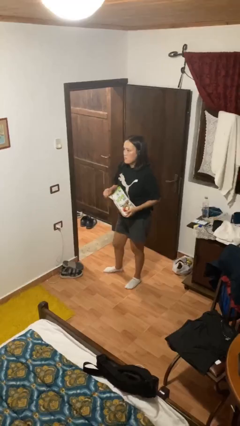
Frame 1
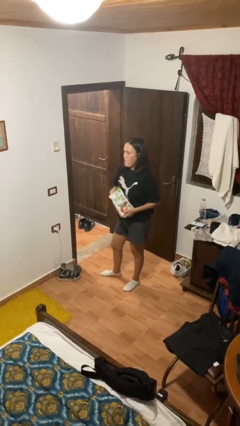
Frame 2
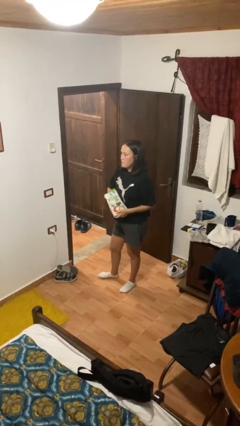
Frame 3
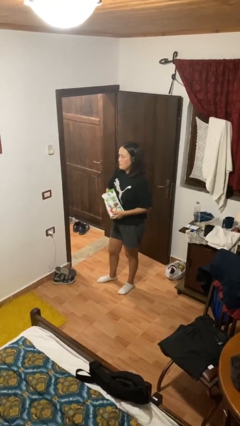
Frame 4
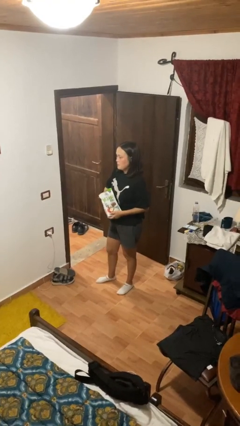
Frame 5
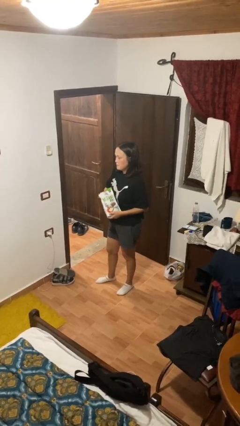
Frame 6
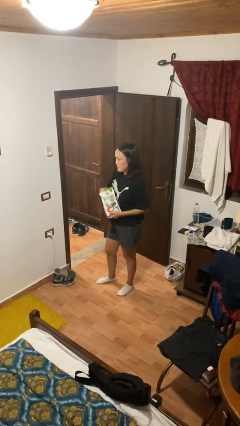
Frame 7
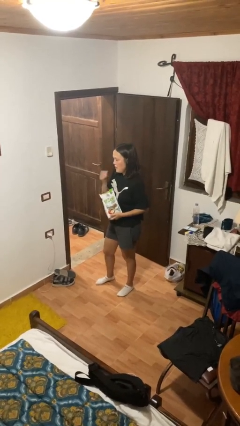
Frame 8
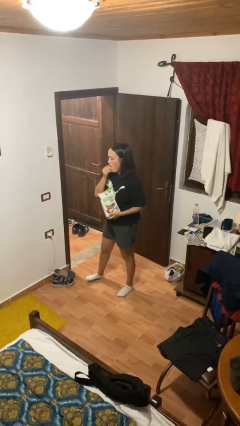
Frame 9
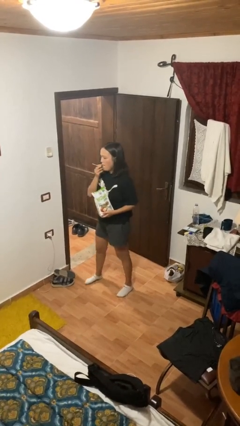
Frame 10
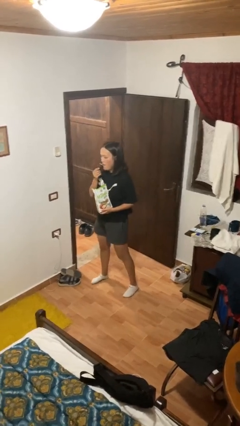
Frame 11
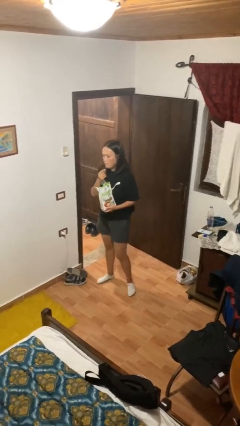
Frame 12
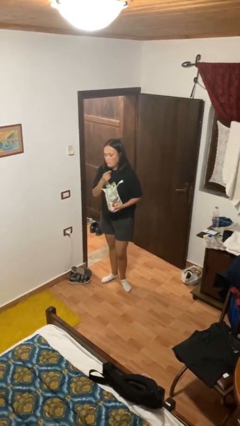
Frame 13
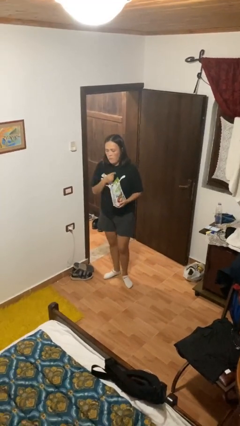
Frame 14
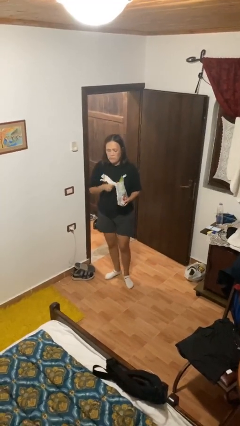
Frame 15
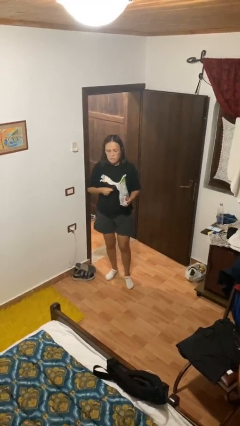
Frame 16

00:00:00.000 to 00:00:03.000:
person eats snack from bag

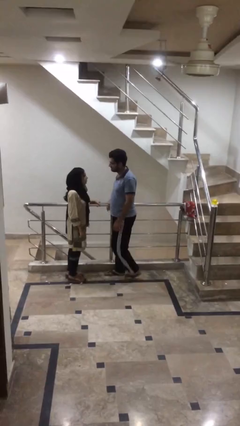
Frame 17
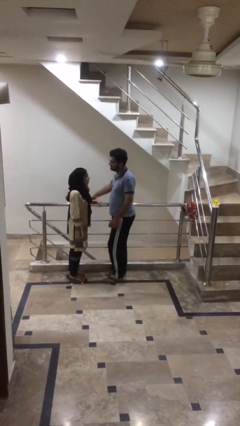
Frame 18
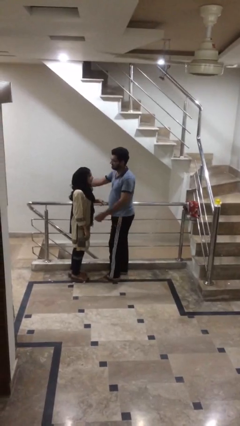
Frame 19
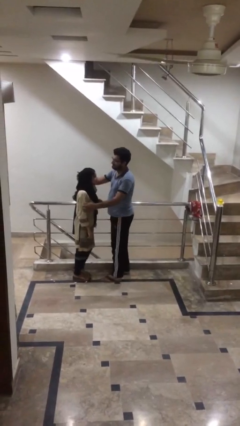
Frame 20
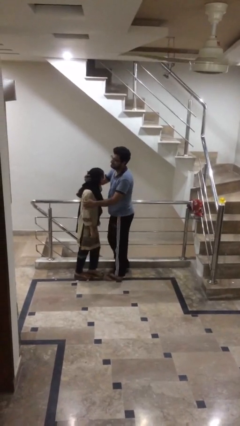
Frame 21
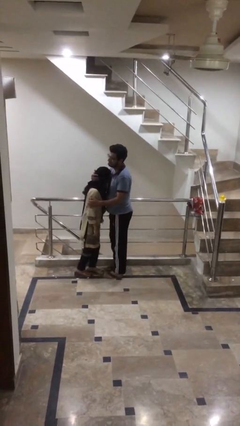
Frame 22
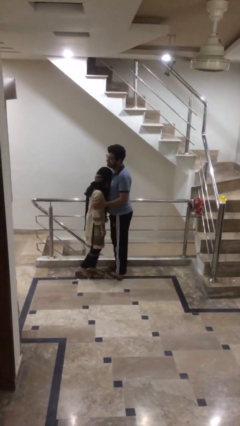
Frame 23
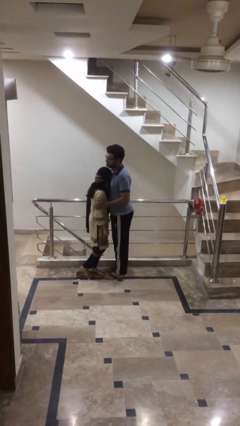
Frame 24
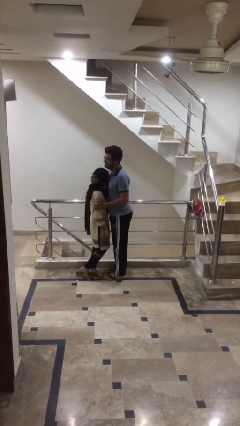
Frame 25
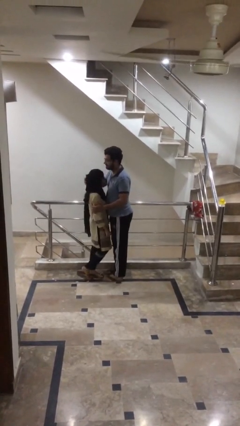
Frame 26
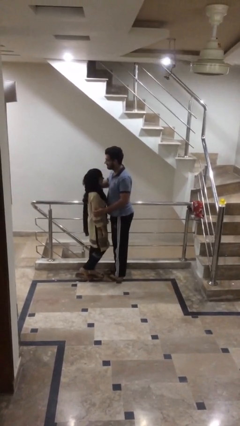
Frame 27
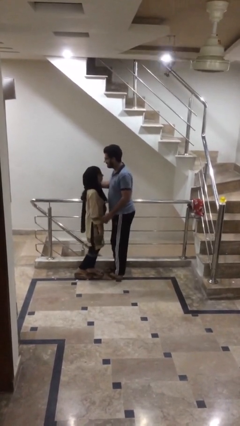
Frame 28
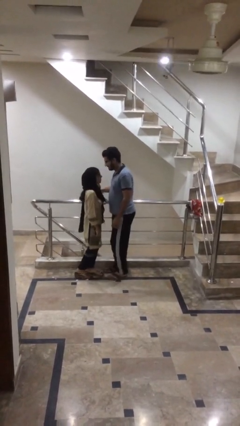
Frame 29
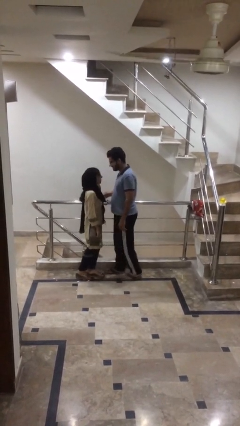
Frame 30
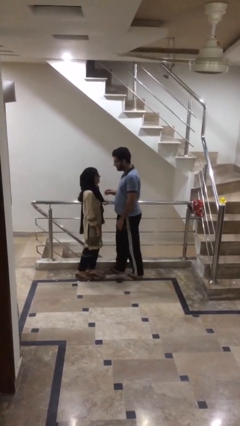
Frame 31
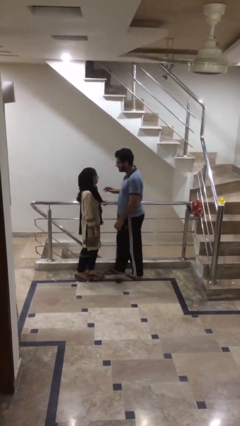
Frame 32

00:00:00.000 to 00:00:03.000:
person embraces person

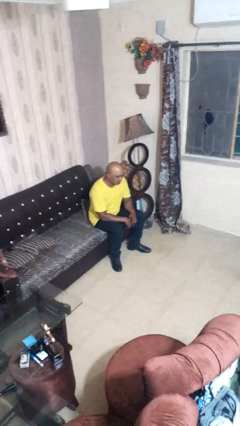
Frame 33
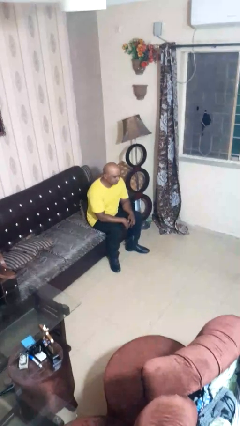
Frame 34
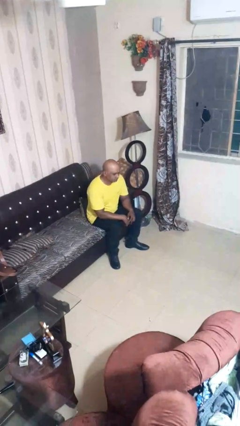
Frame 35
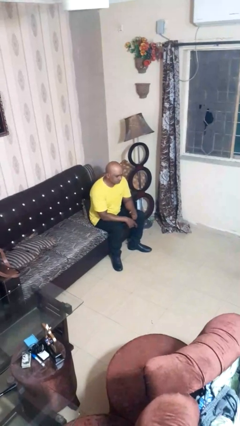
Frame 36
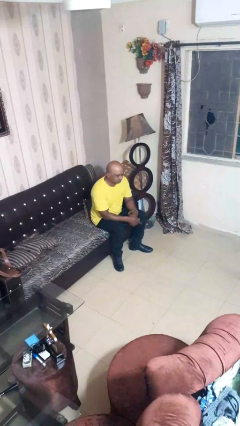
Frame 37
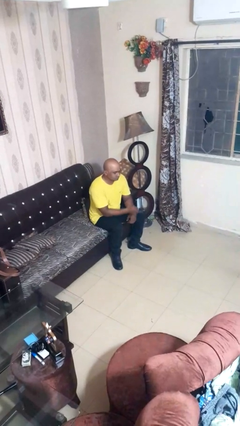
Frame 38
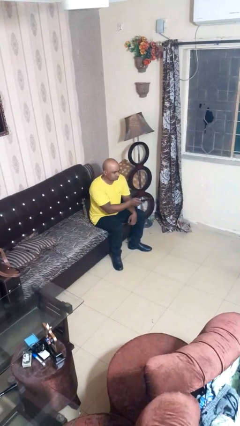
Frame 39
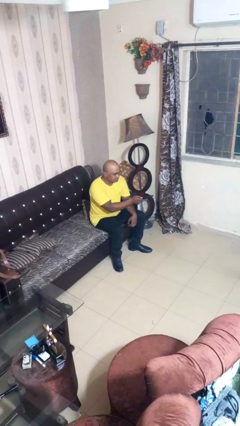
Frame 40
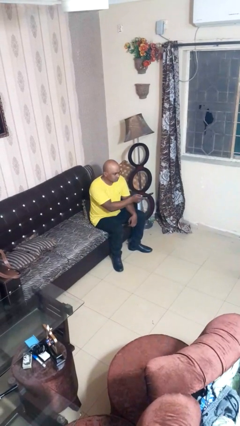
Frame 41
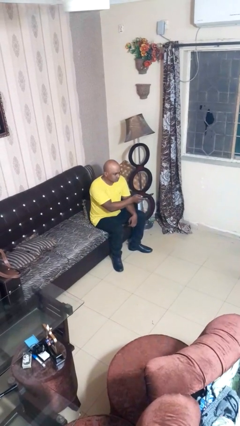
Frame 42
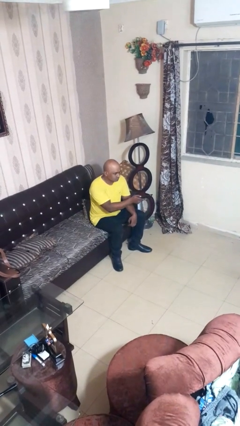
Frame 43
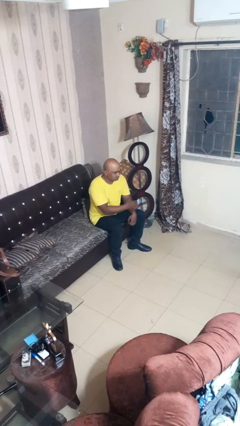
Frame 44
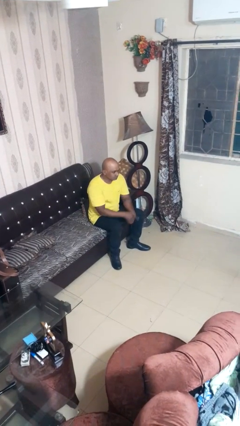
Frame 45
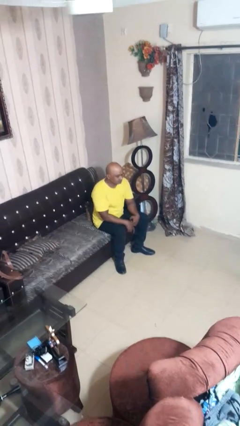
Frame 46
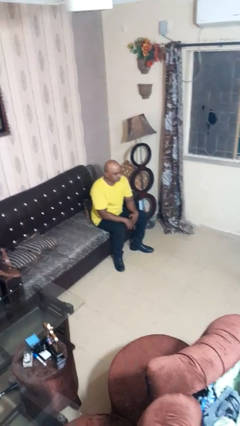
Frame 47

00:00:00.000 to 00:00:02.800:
person uses television remote

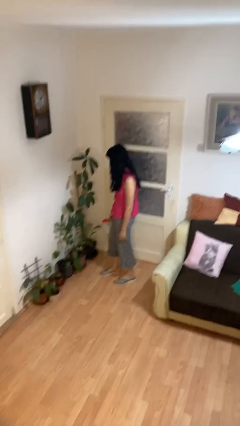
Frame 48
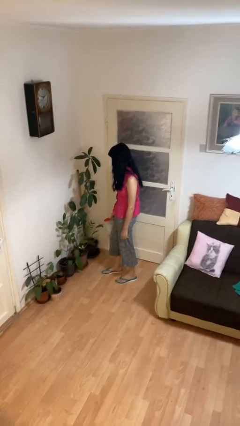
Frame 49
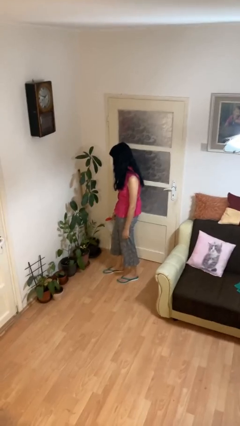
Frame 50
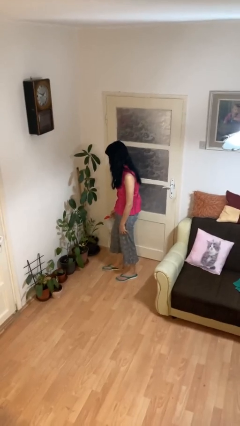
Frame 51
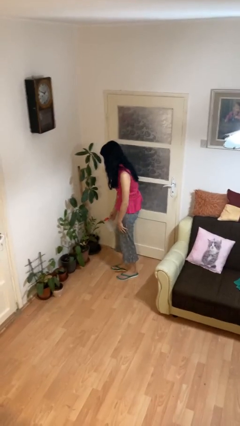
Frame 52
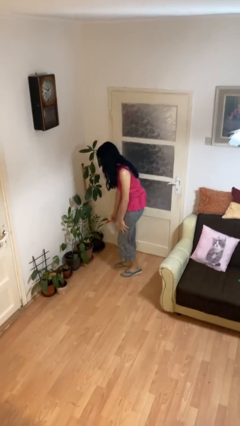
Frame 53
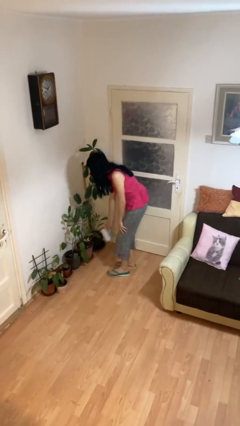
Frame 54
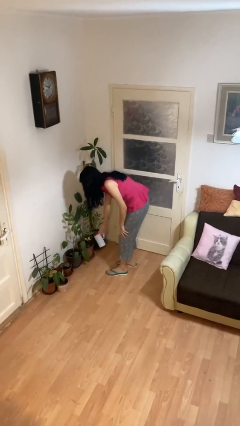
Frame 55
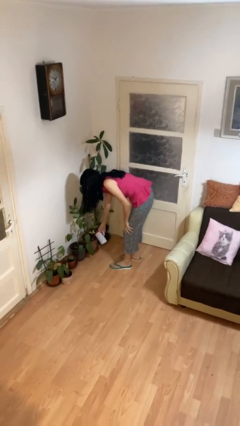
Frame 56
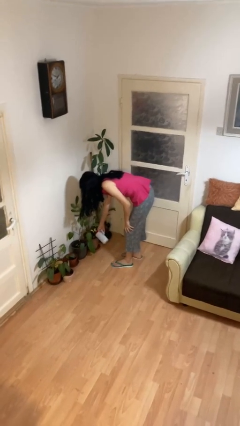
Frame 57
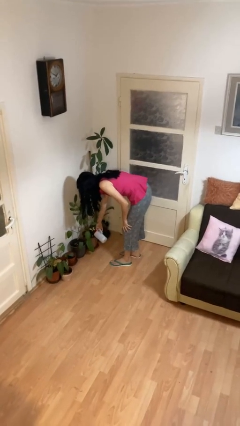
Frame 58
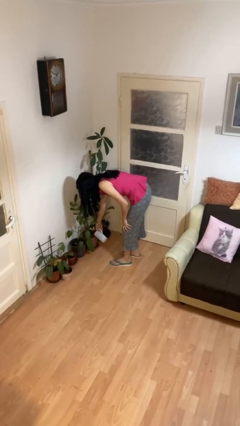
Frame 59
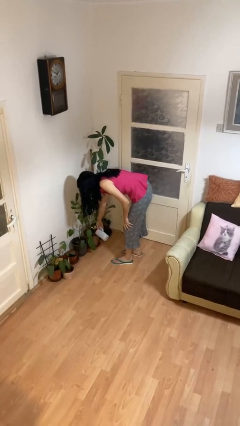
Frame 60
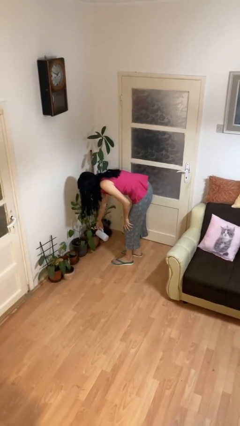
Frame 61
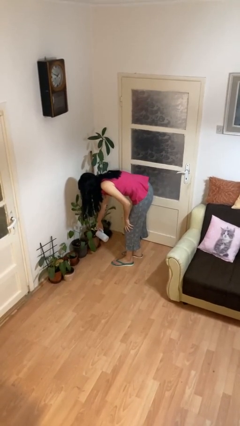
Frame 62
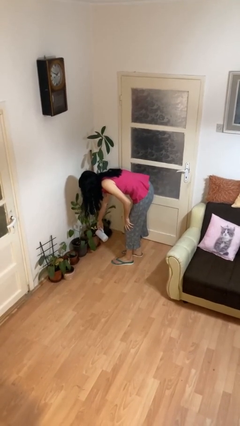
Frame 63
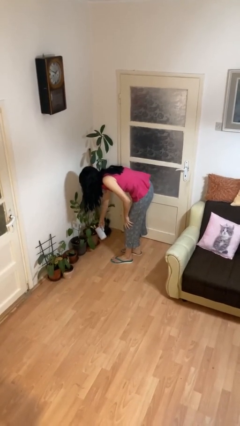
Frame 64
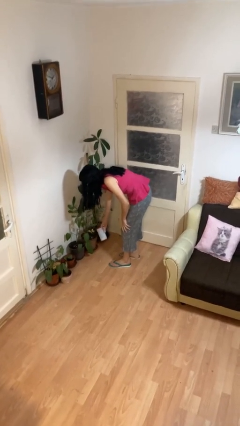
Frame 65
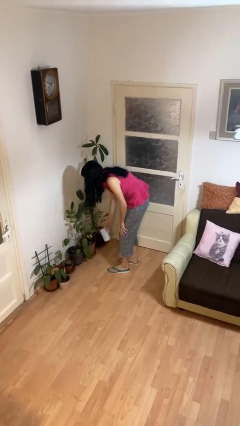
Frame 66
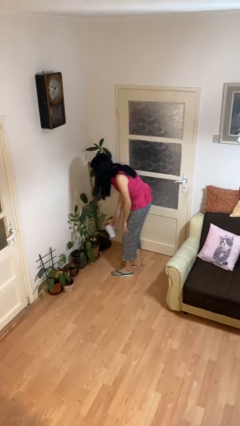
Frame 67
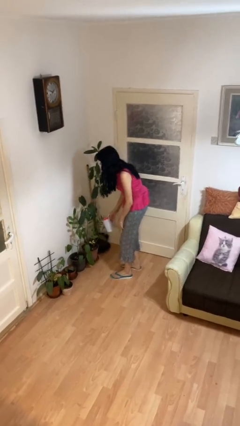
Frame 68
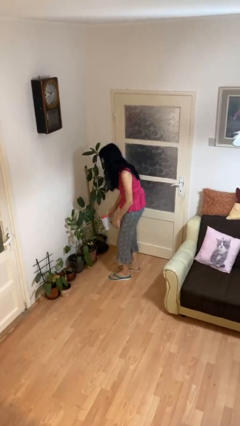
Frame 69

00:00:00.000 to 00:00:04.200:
person waters houseplant

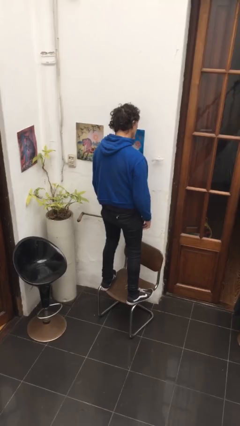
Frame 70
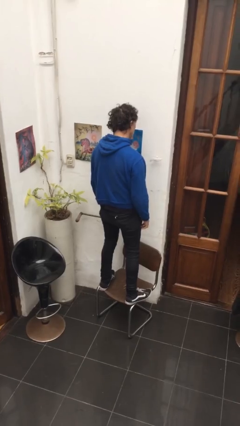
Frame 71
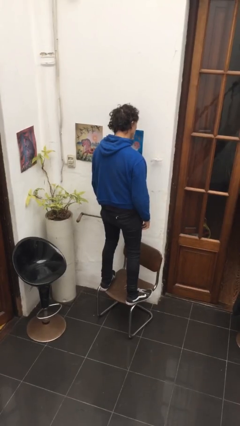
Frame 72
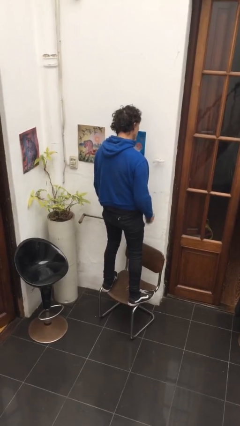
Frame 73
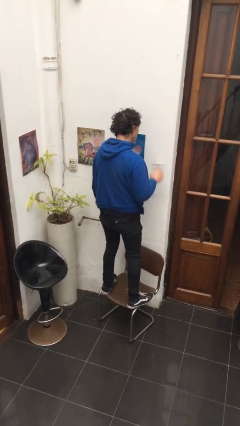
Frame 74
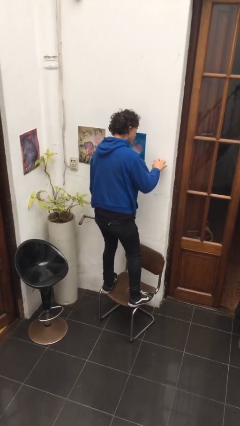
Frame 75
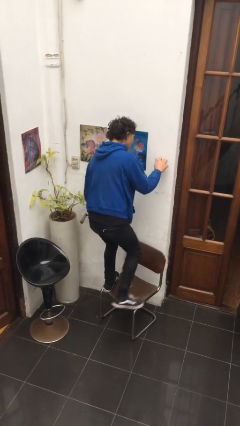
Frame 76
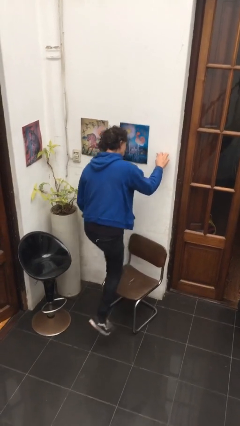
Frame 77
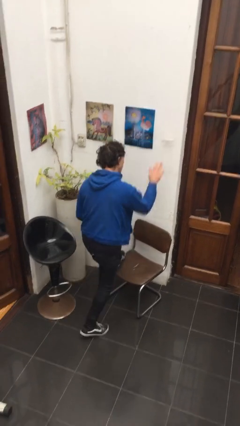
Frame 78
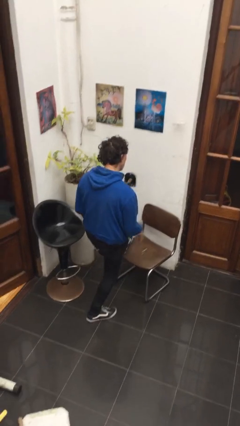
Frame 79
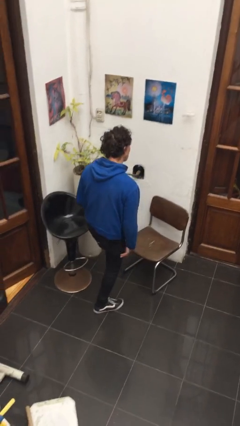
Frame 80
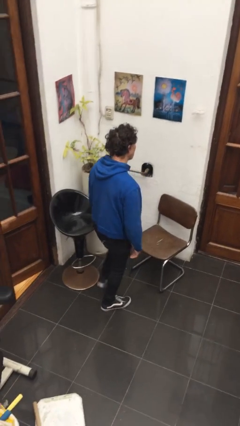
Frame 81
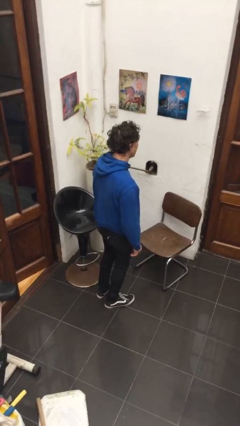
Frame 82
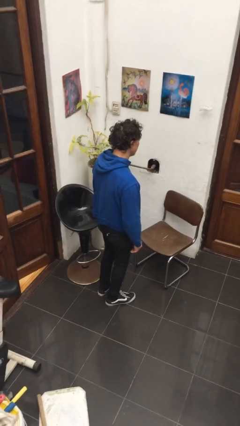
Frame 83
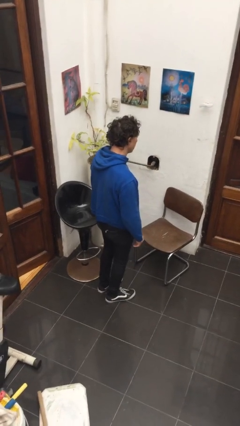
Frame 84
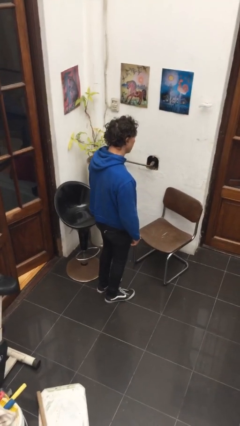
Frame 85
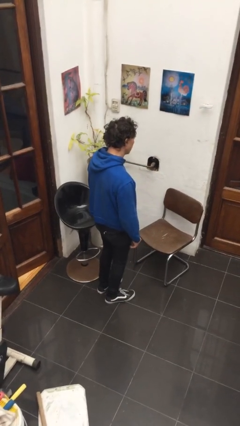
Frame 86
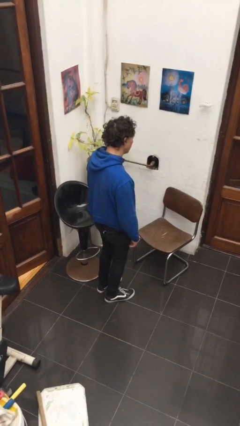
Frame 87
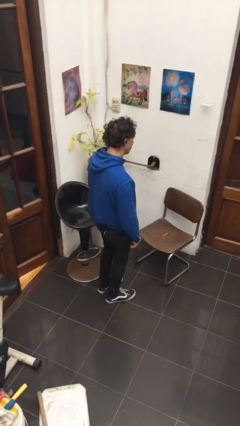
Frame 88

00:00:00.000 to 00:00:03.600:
person climbs off chair

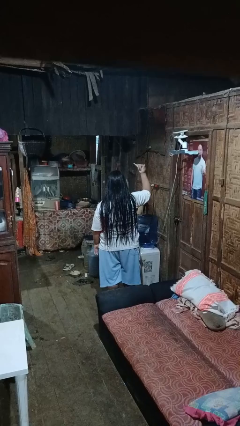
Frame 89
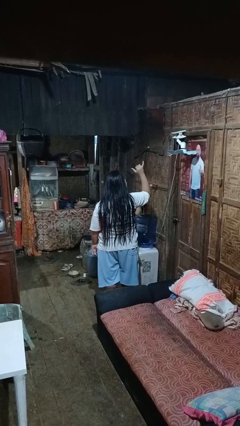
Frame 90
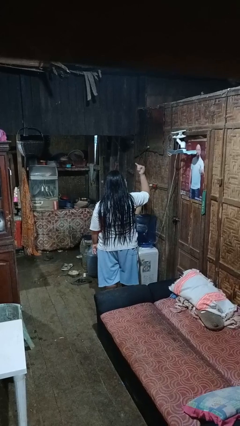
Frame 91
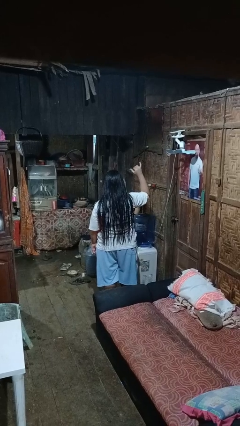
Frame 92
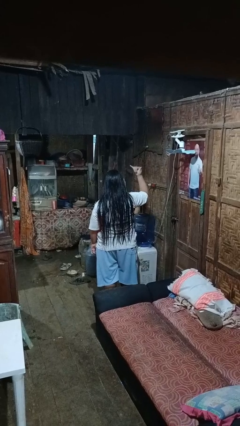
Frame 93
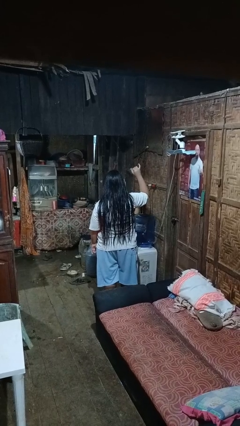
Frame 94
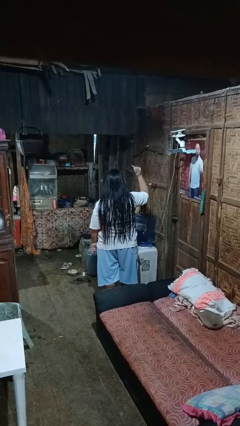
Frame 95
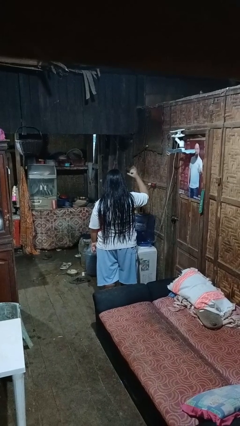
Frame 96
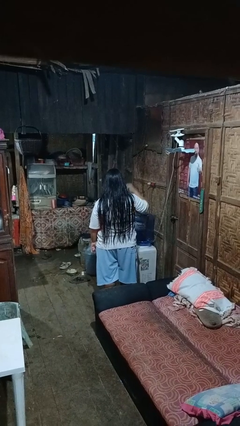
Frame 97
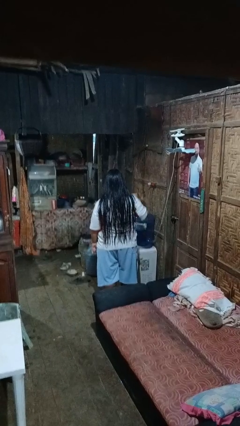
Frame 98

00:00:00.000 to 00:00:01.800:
person gestures hang loose
